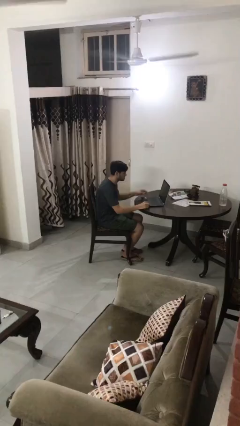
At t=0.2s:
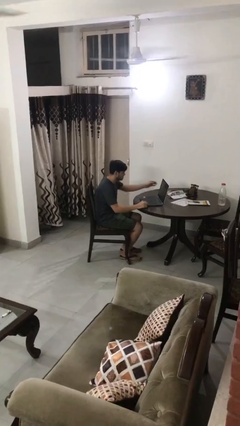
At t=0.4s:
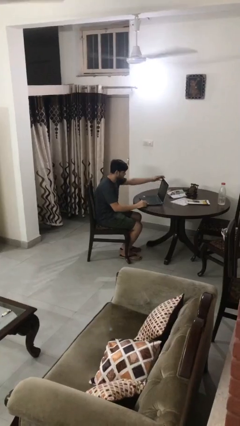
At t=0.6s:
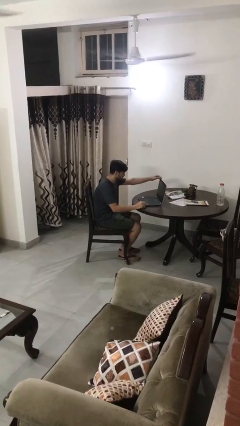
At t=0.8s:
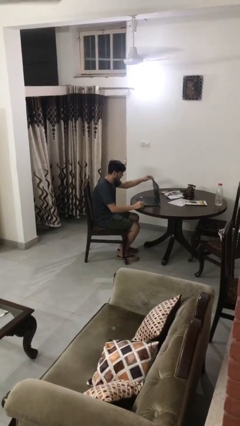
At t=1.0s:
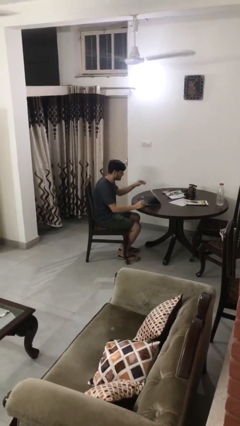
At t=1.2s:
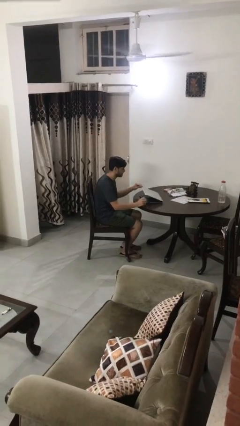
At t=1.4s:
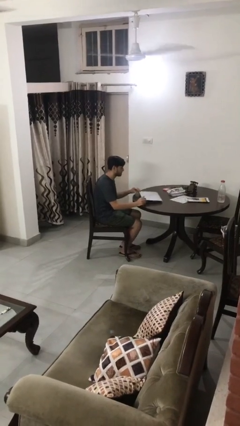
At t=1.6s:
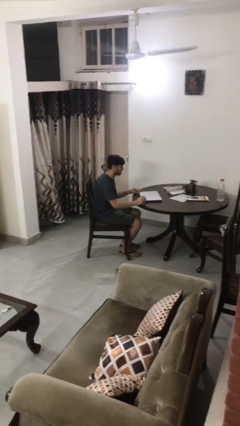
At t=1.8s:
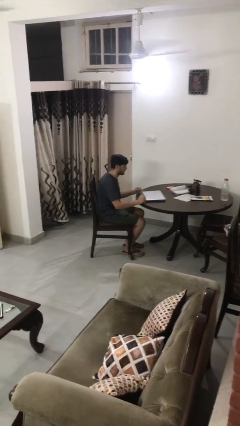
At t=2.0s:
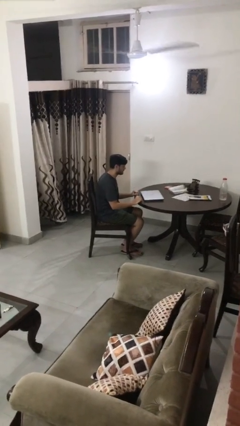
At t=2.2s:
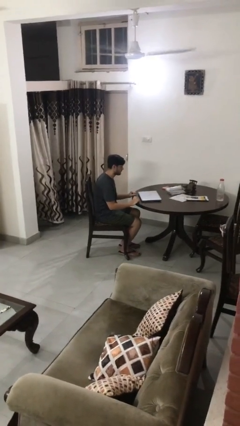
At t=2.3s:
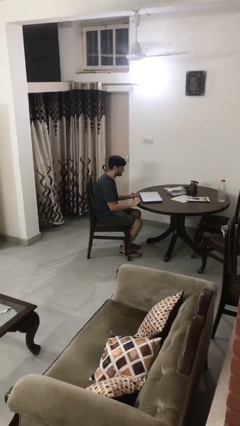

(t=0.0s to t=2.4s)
person closes laptop

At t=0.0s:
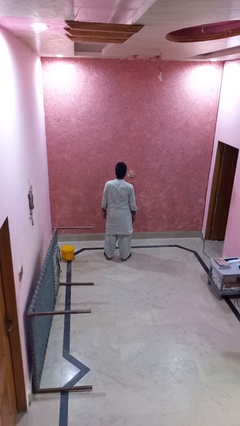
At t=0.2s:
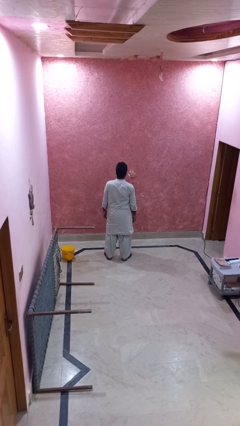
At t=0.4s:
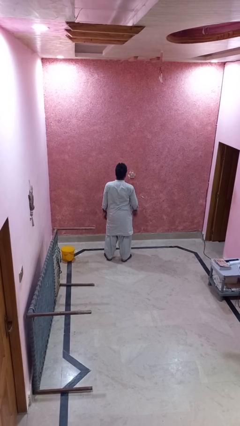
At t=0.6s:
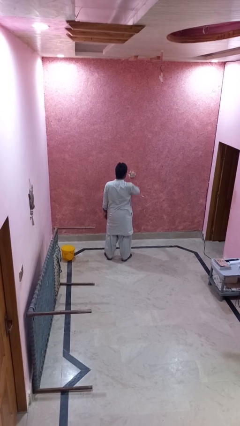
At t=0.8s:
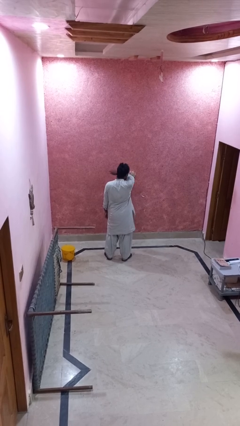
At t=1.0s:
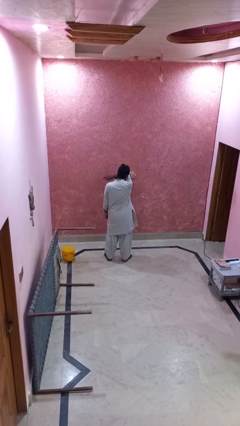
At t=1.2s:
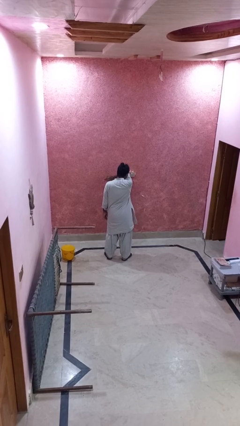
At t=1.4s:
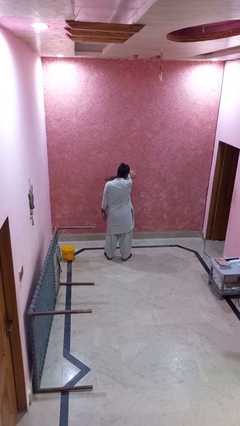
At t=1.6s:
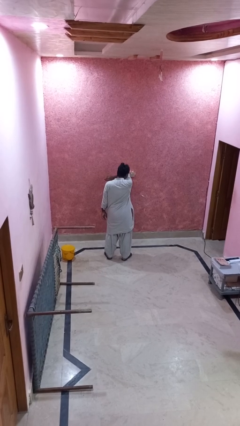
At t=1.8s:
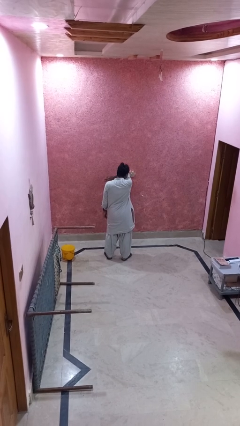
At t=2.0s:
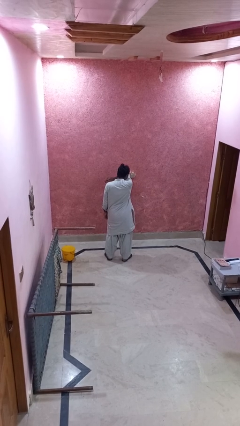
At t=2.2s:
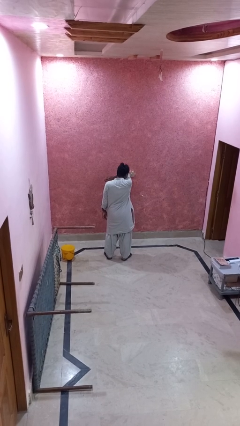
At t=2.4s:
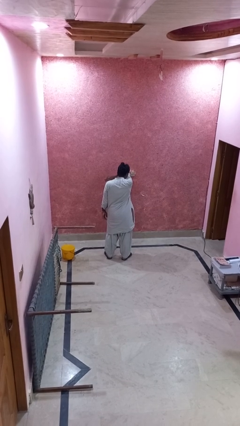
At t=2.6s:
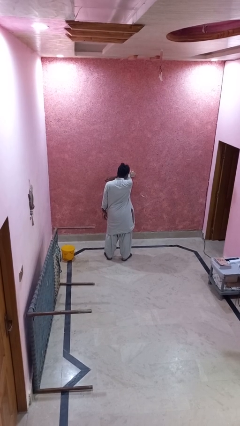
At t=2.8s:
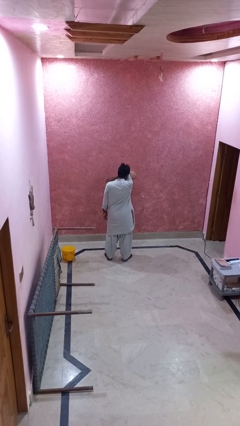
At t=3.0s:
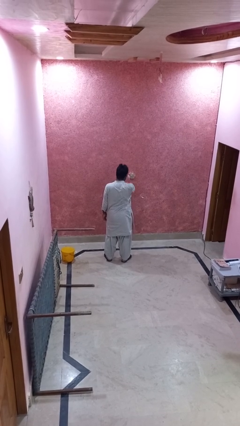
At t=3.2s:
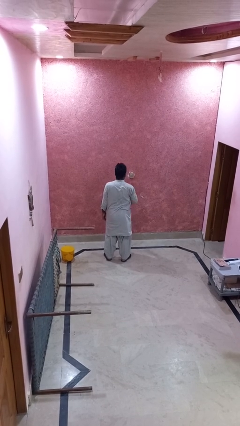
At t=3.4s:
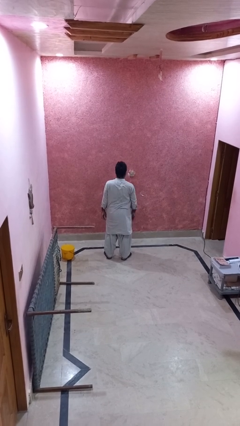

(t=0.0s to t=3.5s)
person sneezes into arm

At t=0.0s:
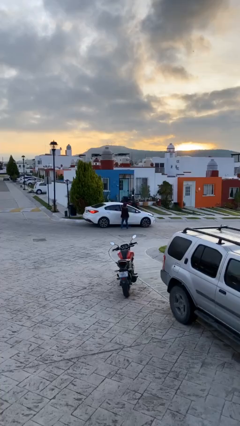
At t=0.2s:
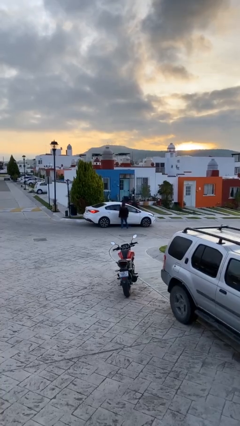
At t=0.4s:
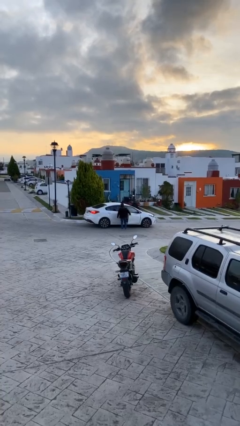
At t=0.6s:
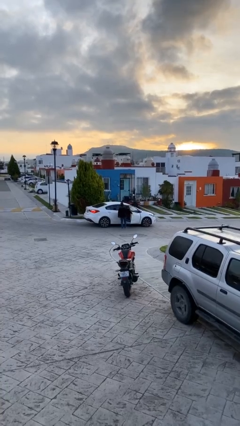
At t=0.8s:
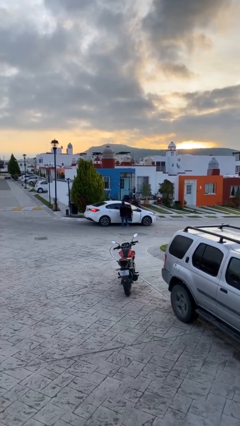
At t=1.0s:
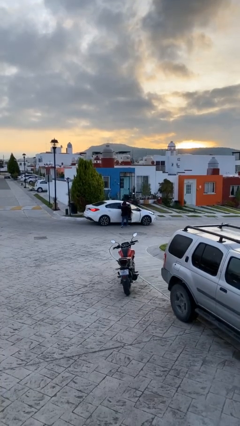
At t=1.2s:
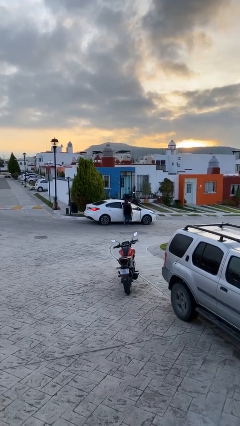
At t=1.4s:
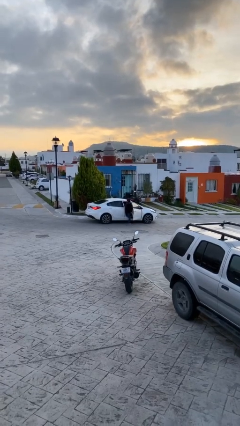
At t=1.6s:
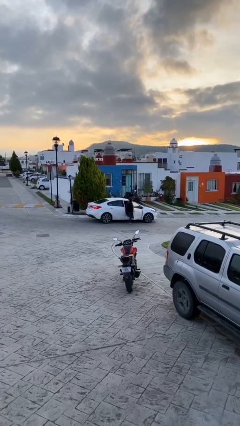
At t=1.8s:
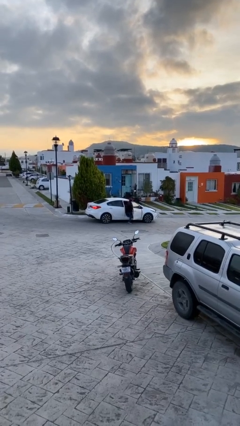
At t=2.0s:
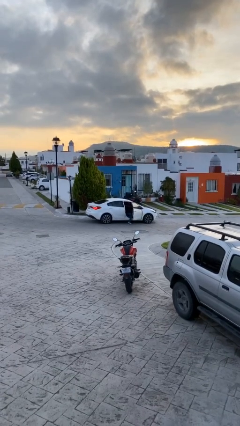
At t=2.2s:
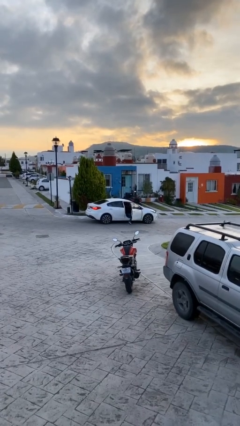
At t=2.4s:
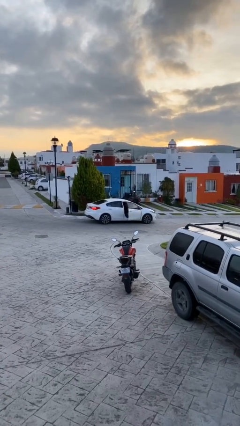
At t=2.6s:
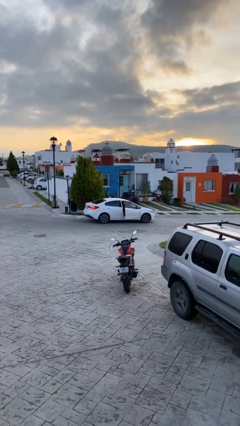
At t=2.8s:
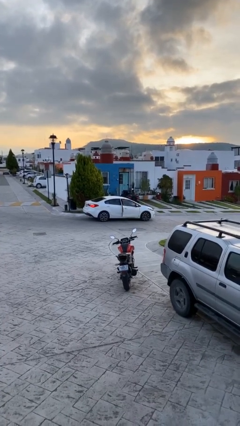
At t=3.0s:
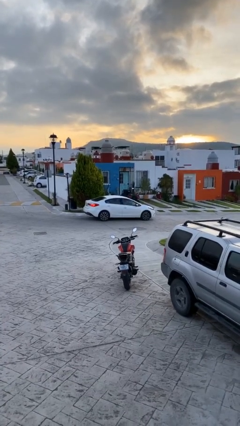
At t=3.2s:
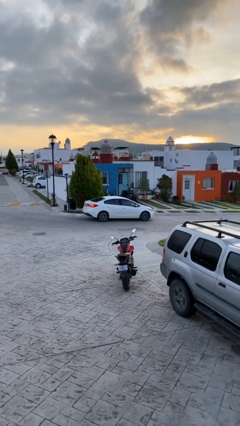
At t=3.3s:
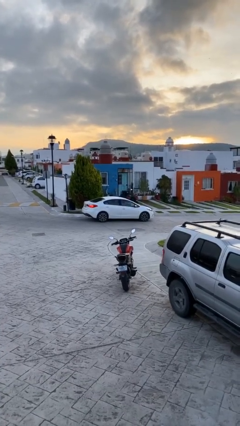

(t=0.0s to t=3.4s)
car picks up person

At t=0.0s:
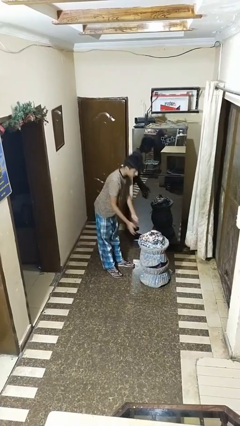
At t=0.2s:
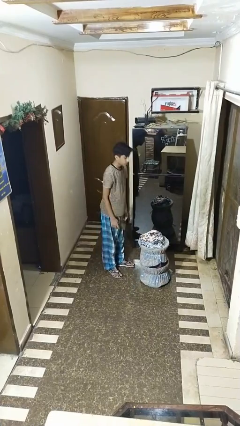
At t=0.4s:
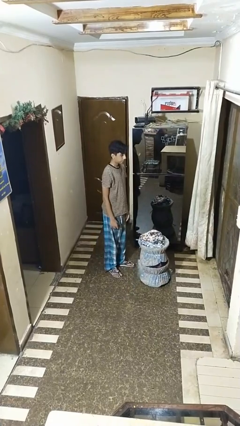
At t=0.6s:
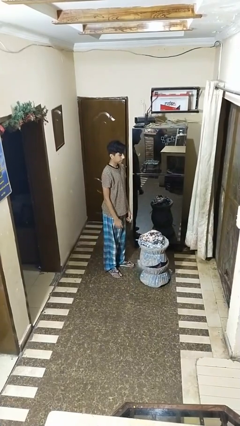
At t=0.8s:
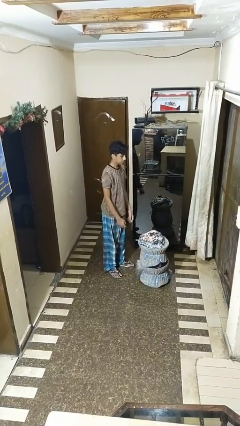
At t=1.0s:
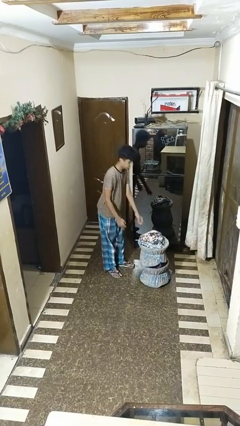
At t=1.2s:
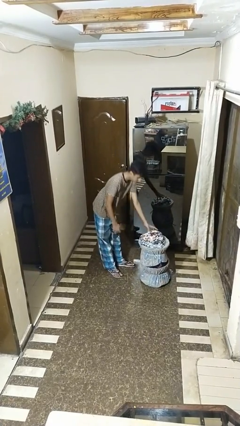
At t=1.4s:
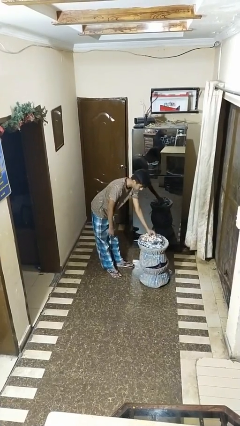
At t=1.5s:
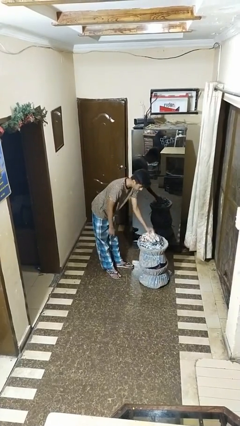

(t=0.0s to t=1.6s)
person takes object from basket

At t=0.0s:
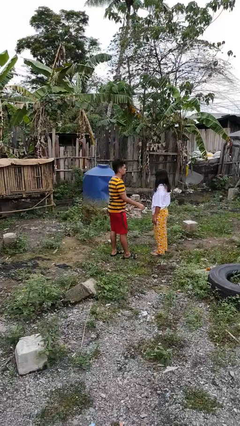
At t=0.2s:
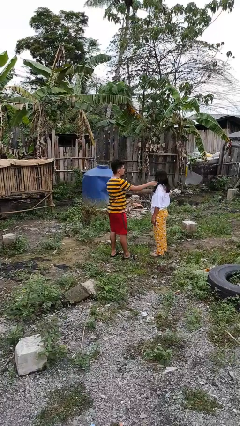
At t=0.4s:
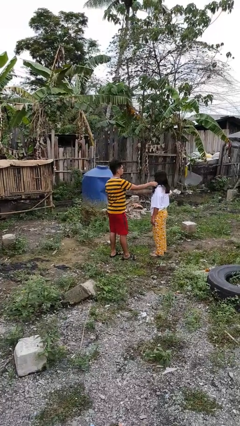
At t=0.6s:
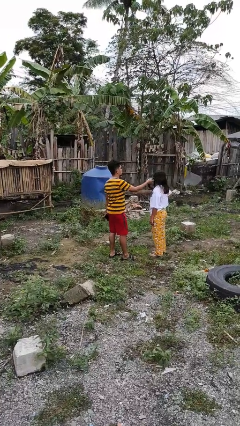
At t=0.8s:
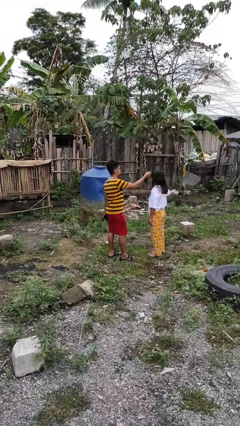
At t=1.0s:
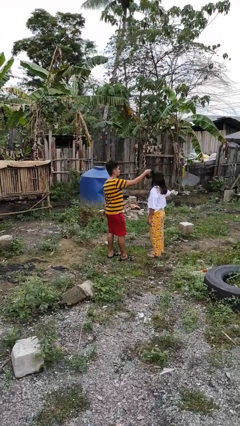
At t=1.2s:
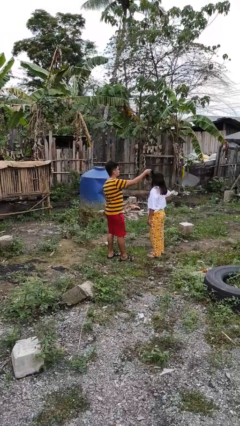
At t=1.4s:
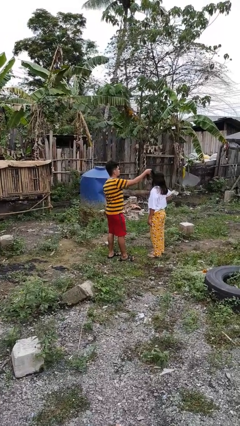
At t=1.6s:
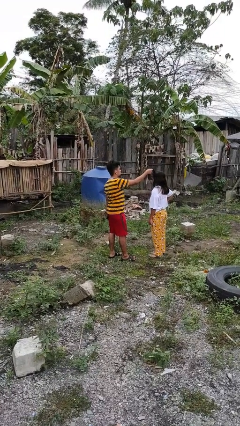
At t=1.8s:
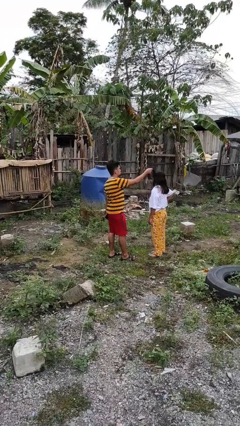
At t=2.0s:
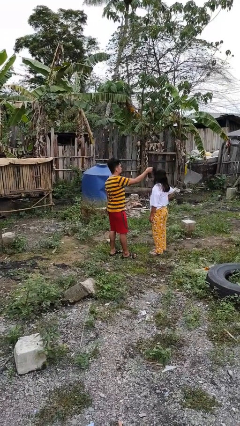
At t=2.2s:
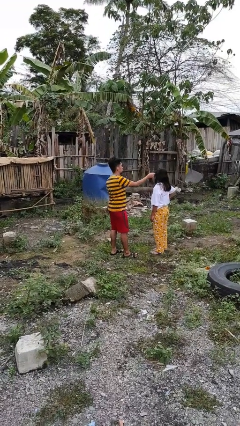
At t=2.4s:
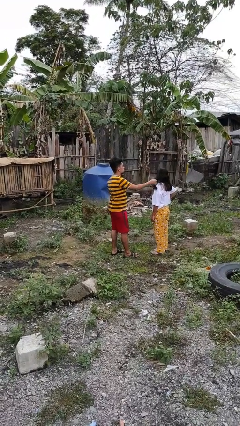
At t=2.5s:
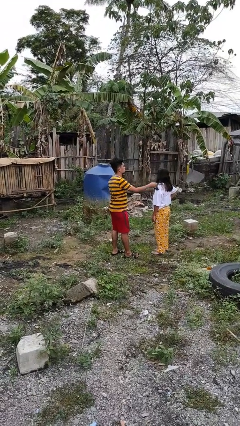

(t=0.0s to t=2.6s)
person grabs person by hair

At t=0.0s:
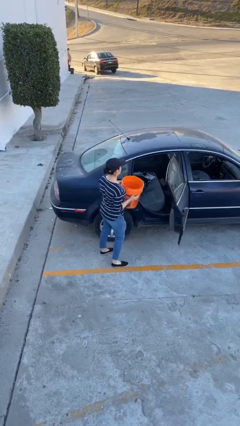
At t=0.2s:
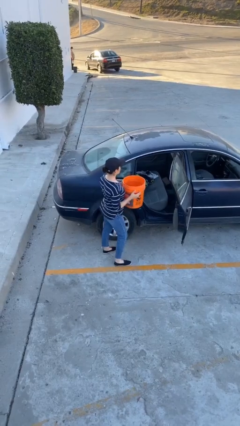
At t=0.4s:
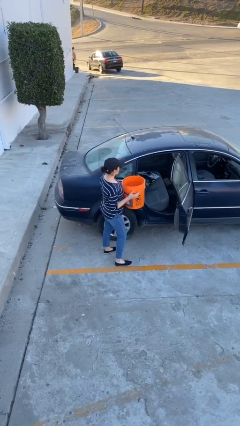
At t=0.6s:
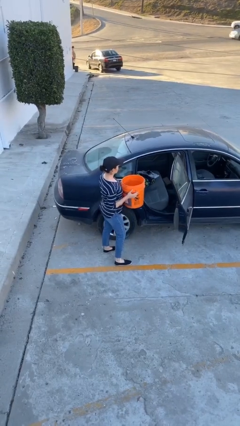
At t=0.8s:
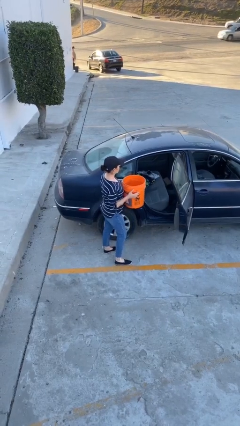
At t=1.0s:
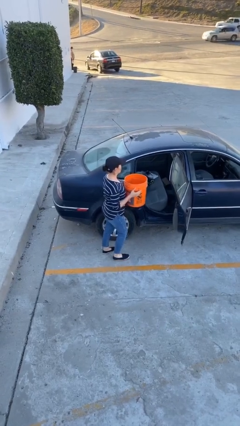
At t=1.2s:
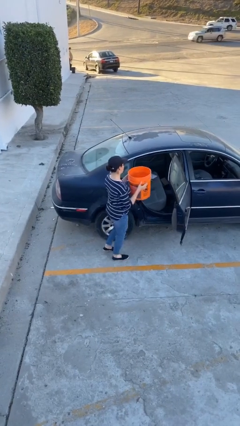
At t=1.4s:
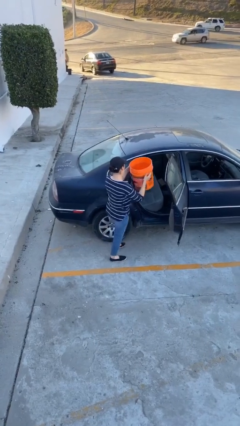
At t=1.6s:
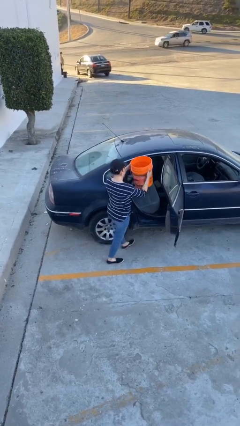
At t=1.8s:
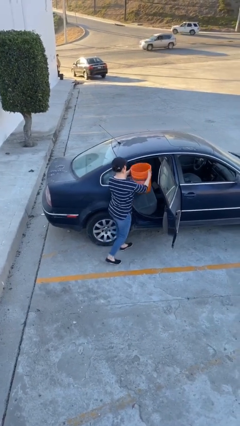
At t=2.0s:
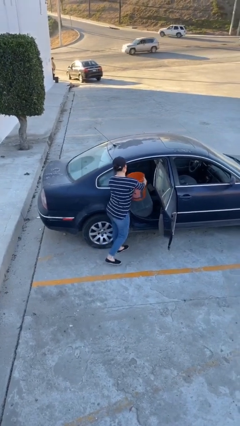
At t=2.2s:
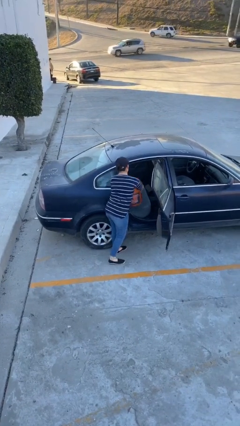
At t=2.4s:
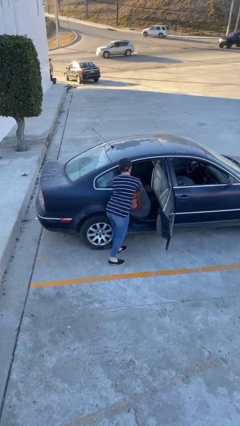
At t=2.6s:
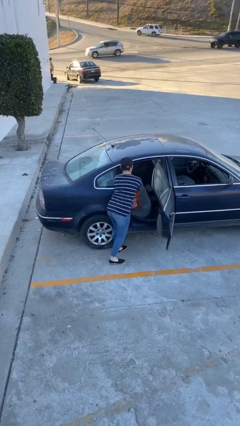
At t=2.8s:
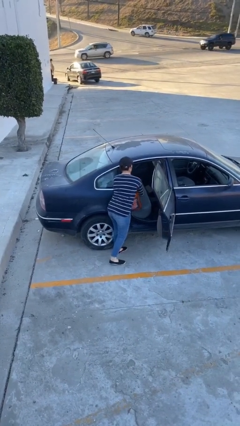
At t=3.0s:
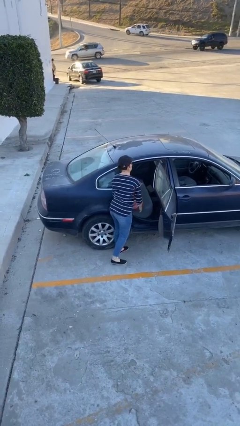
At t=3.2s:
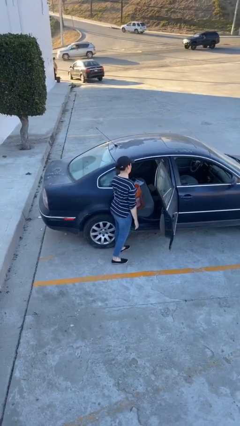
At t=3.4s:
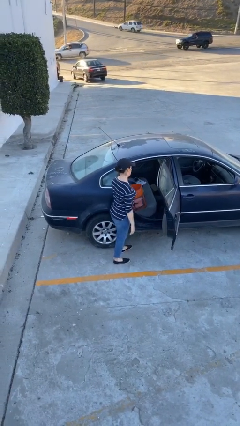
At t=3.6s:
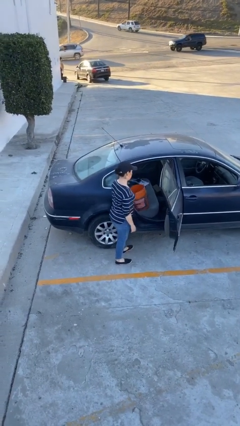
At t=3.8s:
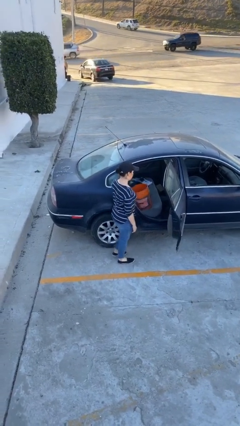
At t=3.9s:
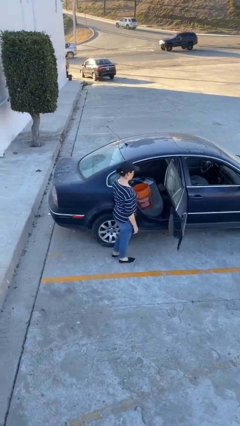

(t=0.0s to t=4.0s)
person loads car
